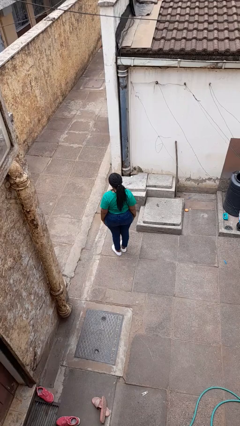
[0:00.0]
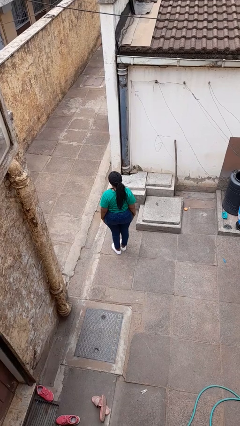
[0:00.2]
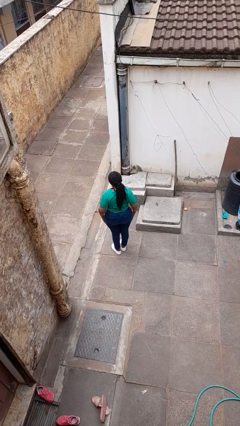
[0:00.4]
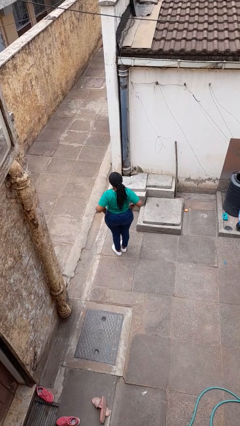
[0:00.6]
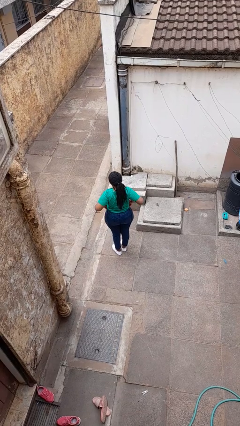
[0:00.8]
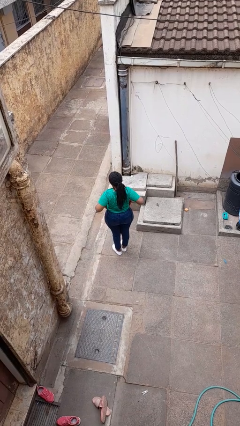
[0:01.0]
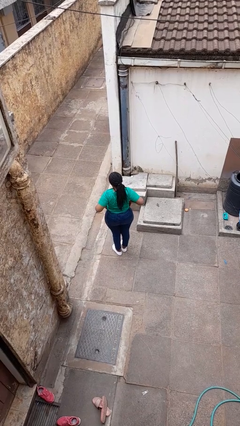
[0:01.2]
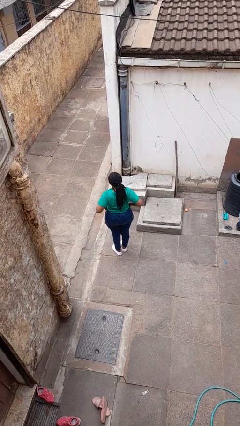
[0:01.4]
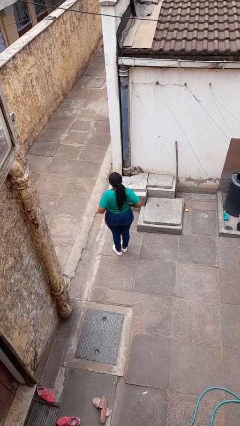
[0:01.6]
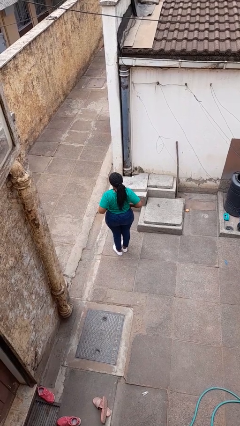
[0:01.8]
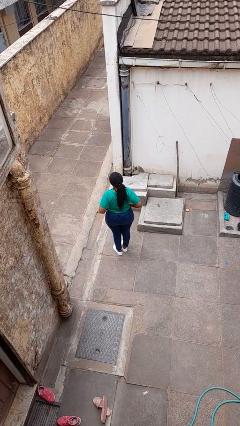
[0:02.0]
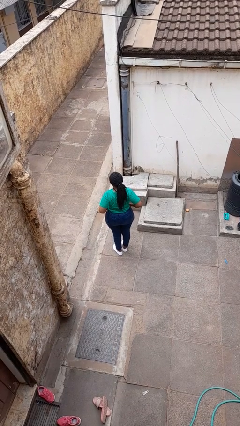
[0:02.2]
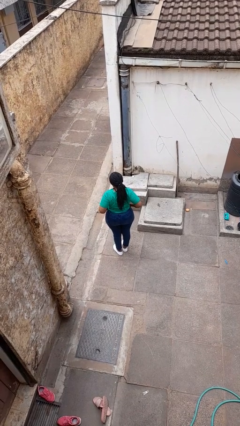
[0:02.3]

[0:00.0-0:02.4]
person puts hands in back pockets

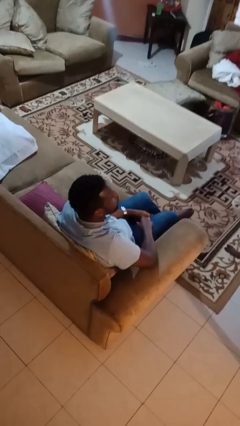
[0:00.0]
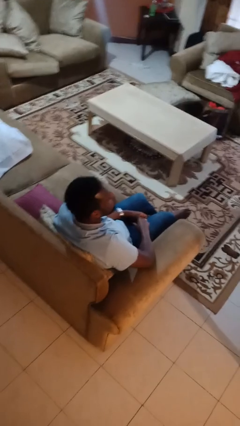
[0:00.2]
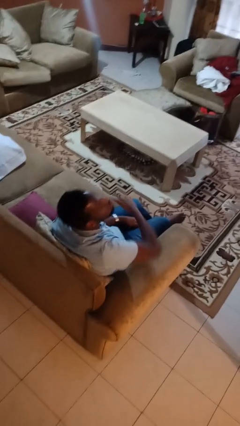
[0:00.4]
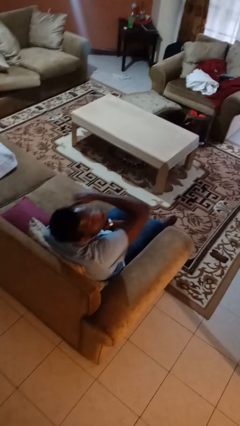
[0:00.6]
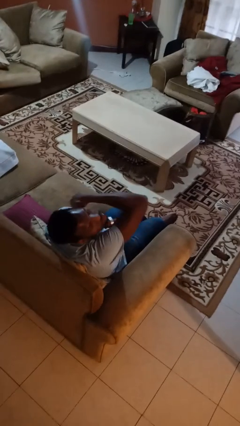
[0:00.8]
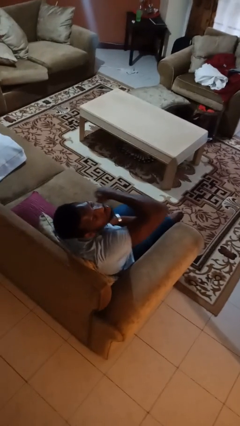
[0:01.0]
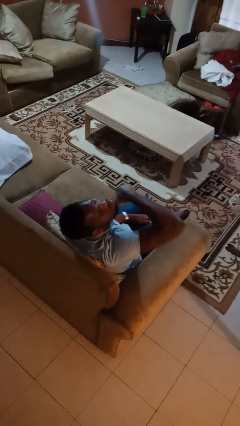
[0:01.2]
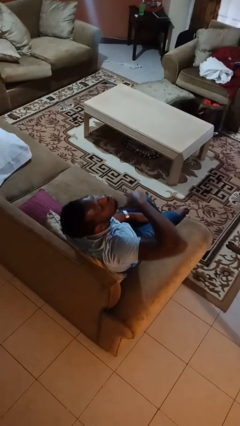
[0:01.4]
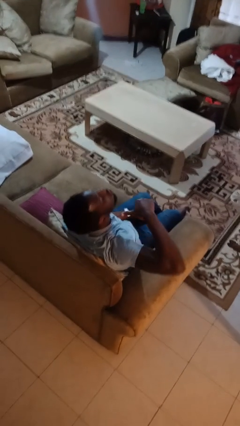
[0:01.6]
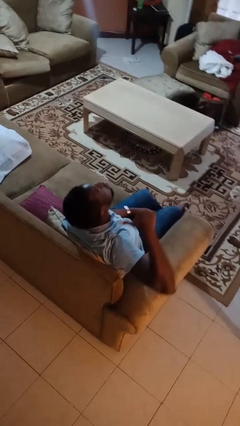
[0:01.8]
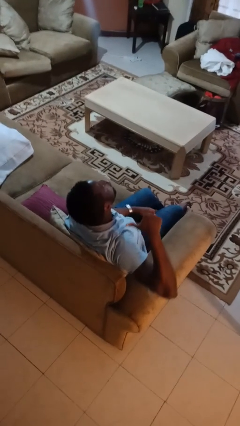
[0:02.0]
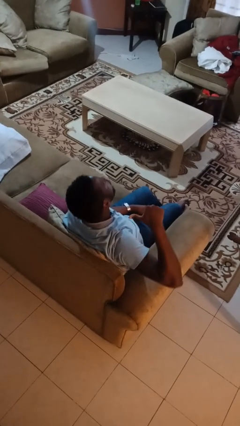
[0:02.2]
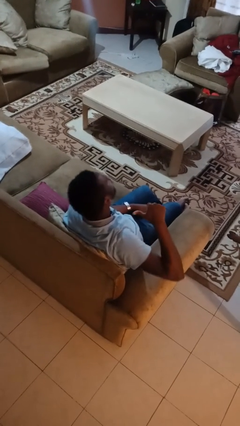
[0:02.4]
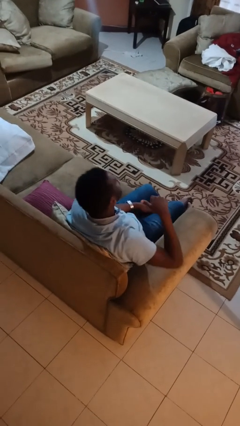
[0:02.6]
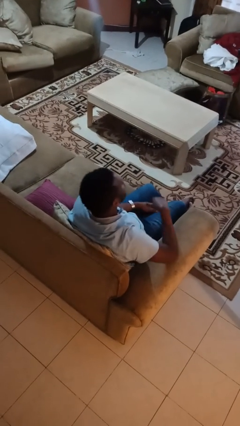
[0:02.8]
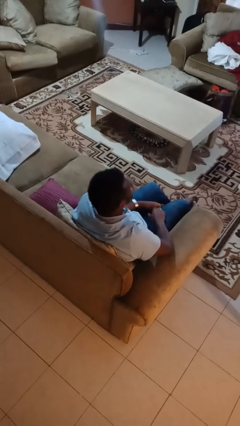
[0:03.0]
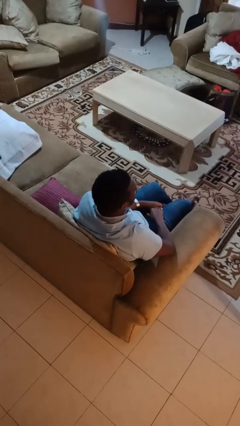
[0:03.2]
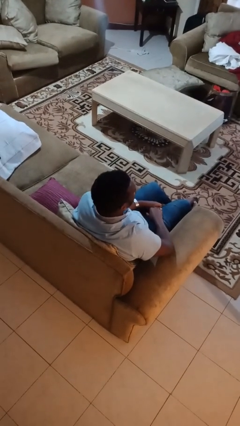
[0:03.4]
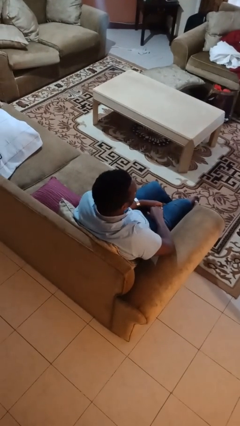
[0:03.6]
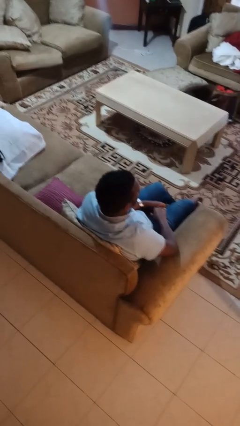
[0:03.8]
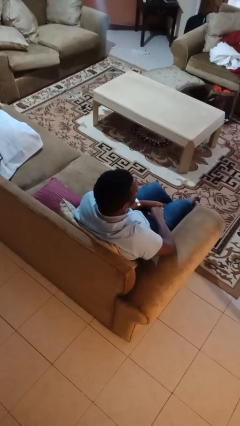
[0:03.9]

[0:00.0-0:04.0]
person gestures cut

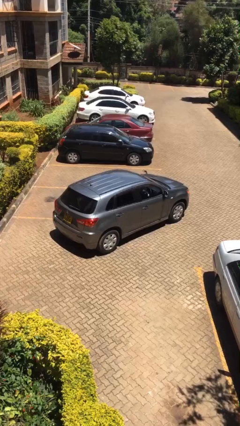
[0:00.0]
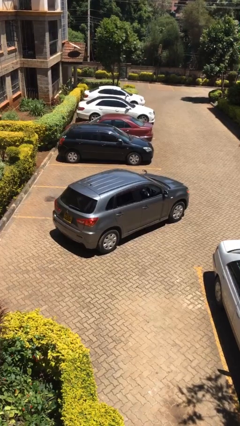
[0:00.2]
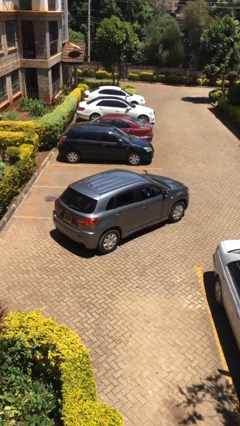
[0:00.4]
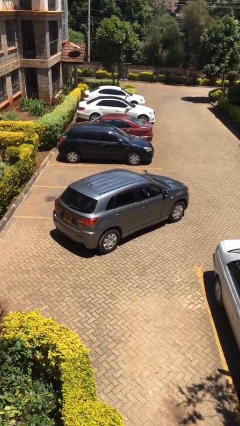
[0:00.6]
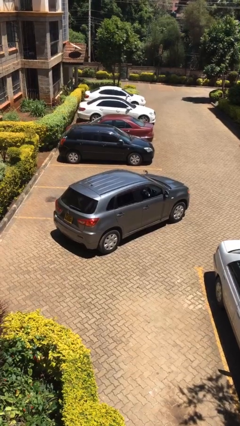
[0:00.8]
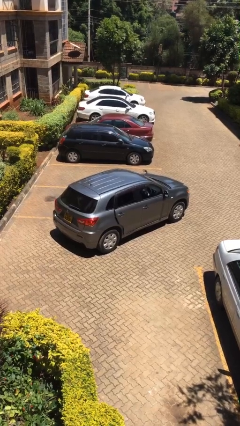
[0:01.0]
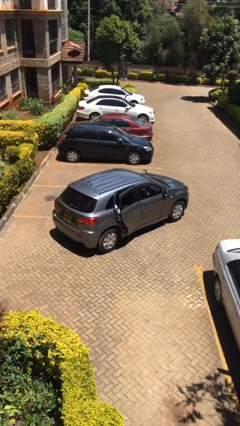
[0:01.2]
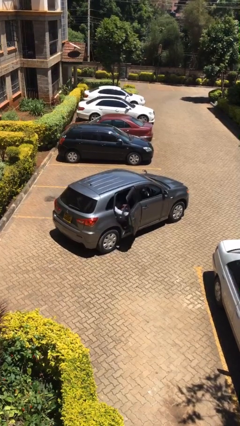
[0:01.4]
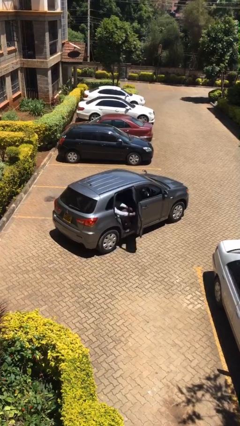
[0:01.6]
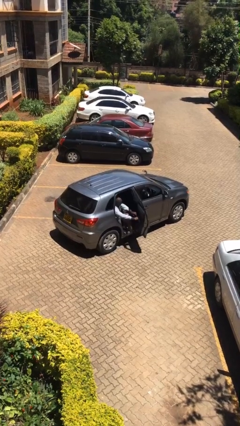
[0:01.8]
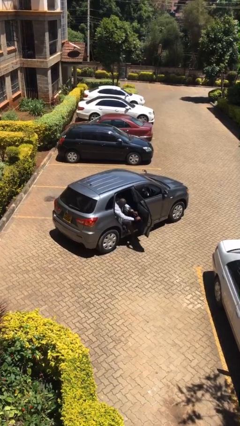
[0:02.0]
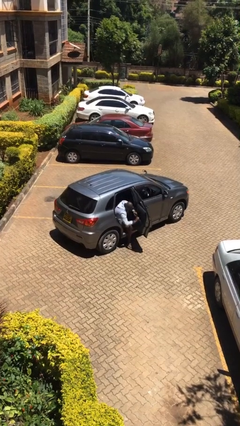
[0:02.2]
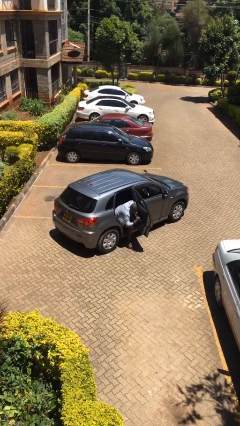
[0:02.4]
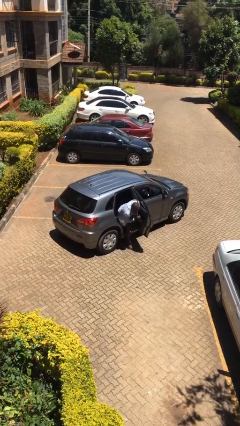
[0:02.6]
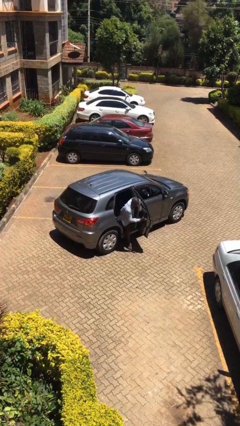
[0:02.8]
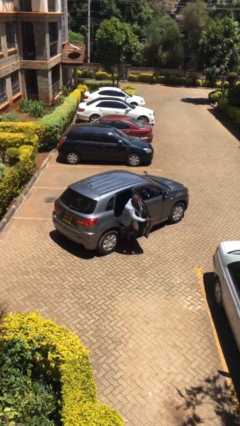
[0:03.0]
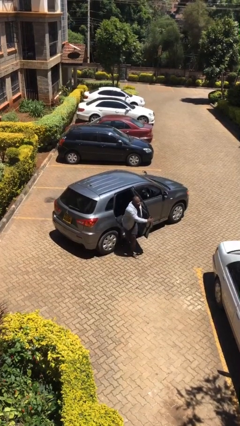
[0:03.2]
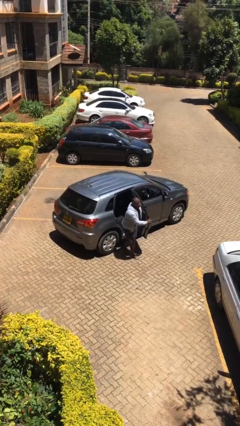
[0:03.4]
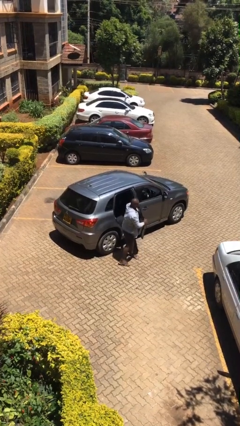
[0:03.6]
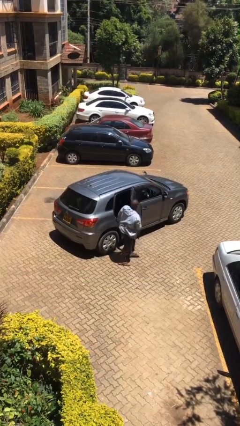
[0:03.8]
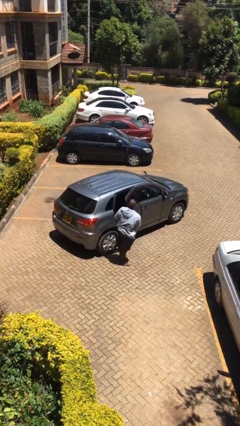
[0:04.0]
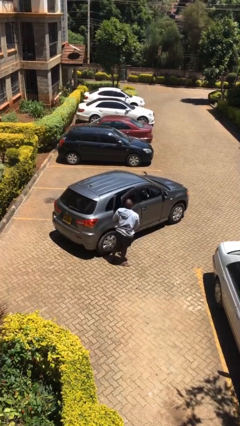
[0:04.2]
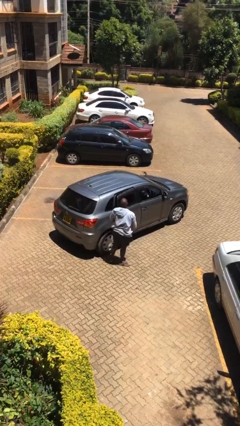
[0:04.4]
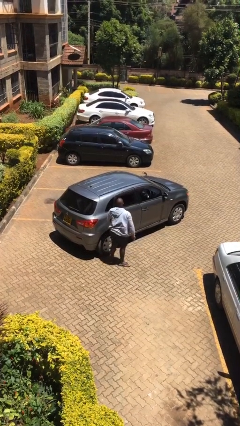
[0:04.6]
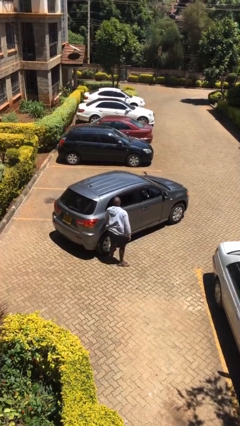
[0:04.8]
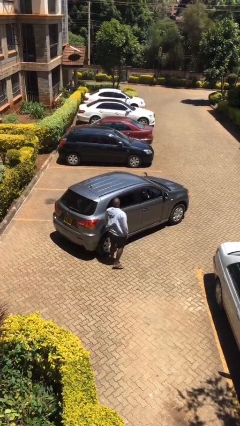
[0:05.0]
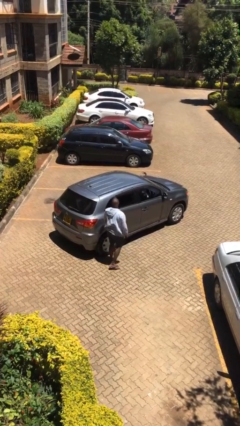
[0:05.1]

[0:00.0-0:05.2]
car drops off person

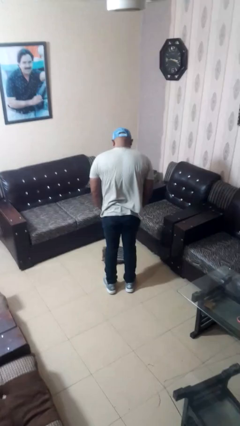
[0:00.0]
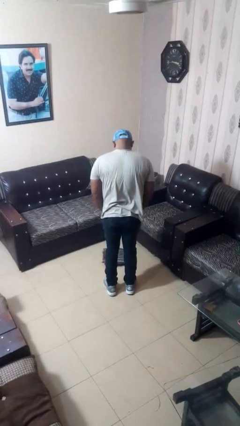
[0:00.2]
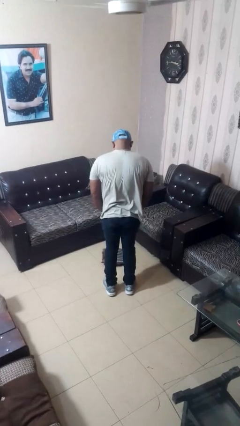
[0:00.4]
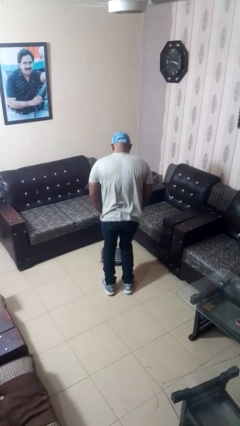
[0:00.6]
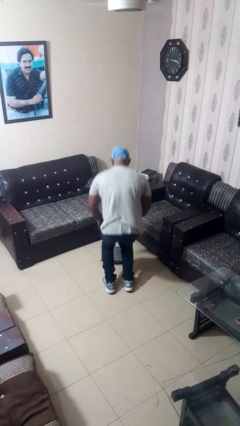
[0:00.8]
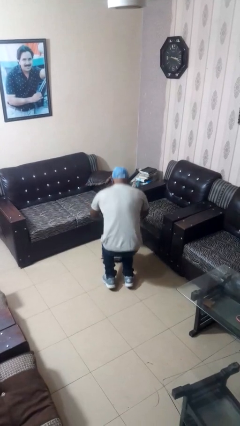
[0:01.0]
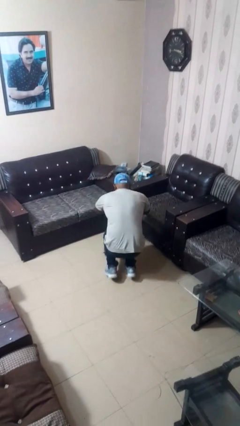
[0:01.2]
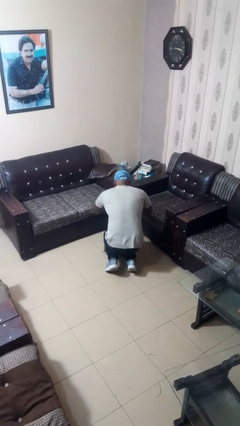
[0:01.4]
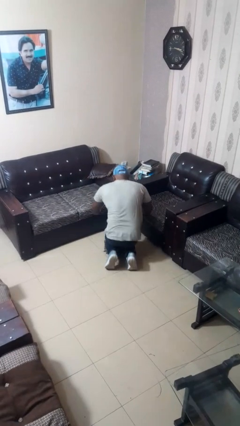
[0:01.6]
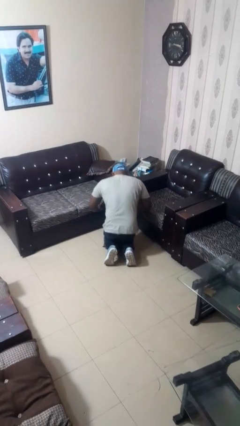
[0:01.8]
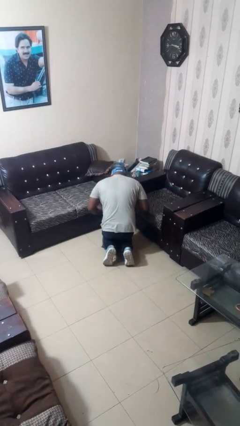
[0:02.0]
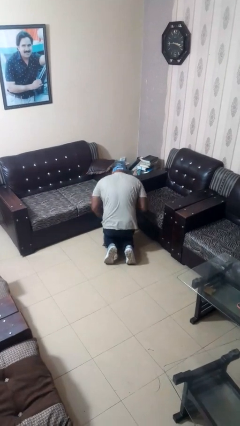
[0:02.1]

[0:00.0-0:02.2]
person kneels

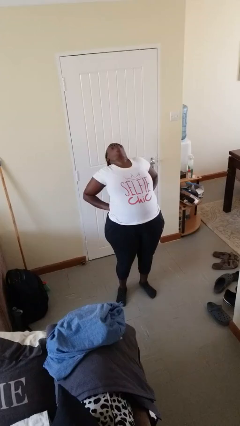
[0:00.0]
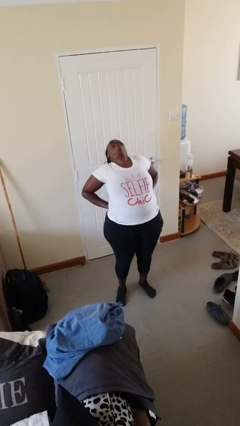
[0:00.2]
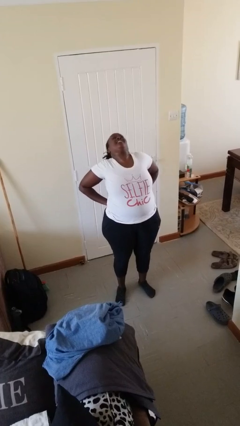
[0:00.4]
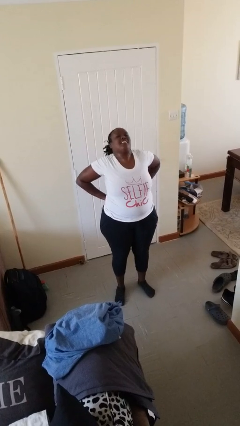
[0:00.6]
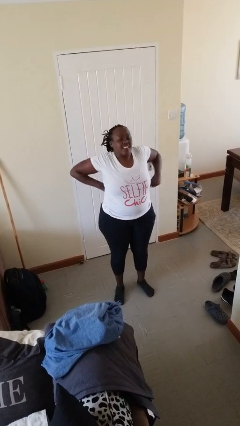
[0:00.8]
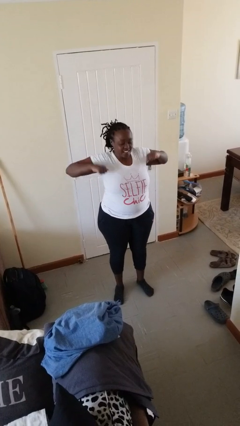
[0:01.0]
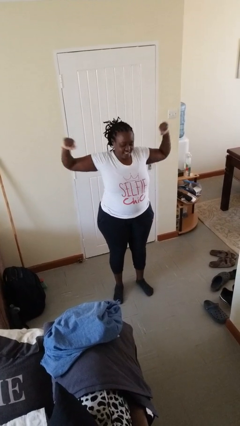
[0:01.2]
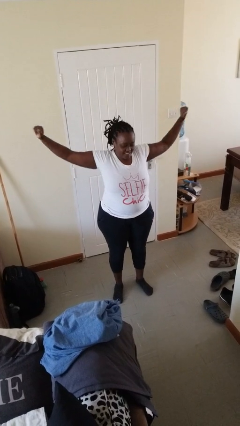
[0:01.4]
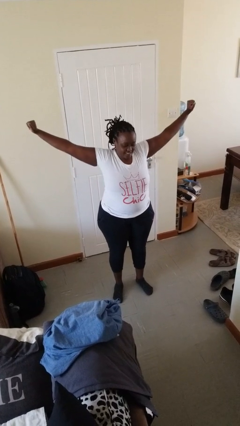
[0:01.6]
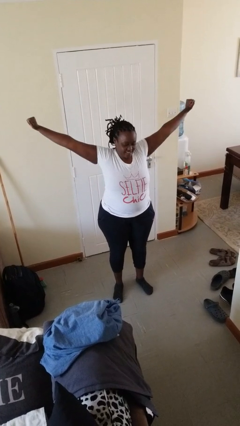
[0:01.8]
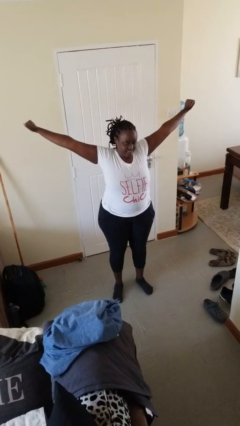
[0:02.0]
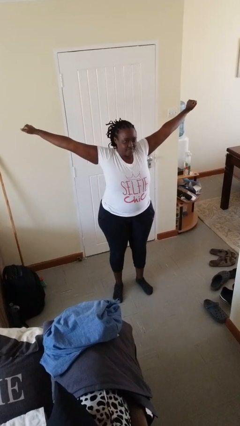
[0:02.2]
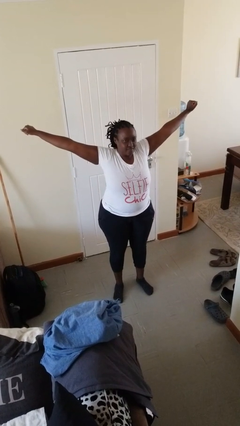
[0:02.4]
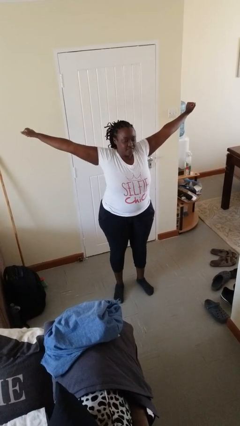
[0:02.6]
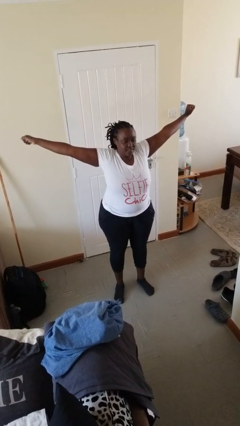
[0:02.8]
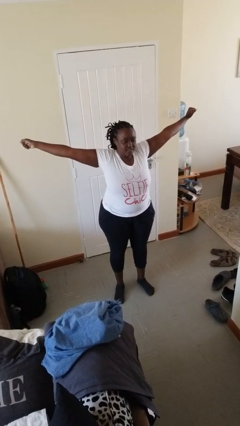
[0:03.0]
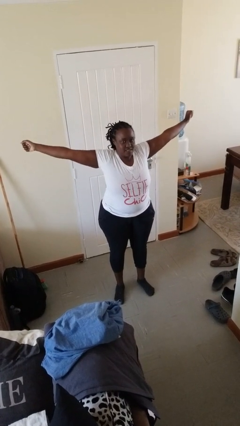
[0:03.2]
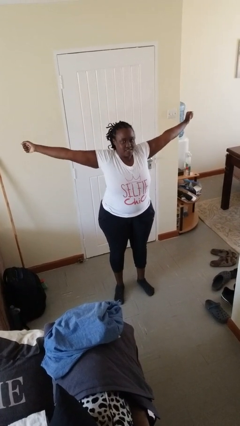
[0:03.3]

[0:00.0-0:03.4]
person stretches arms to side

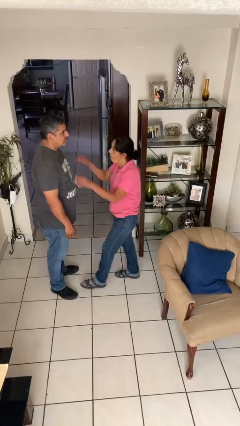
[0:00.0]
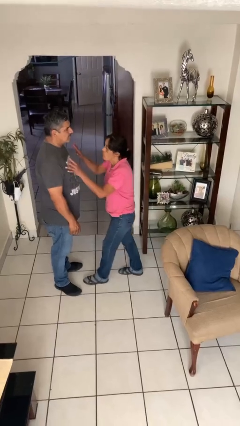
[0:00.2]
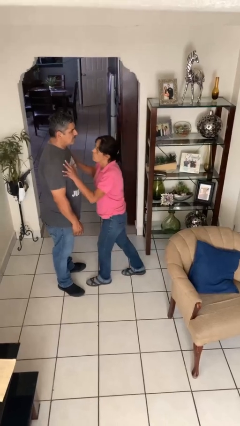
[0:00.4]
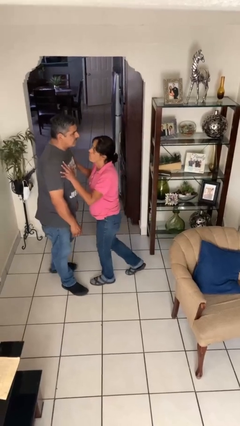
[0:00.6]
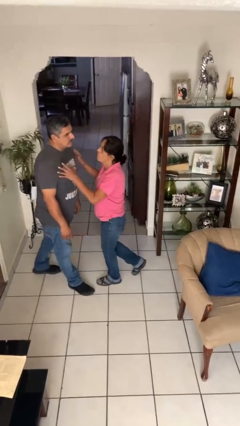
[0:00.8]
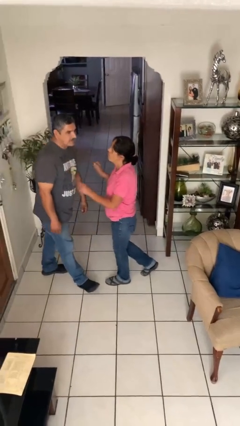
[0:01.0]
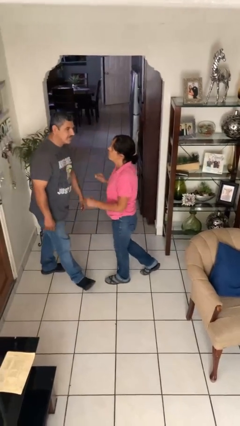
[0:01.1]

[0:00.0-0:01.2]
person shoves person
